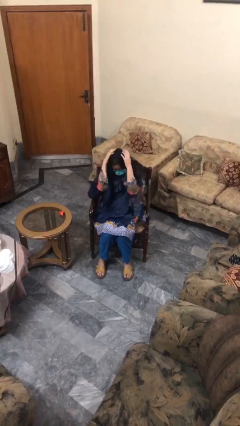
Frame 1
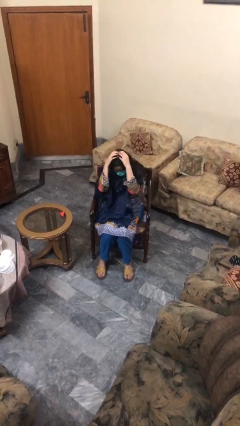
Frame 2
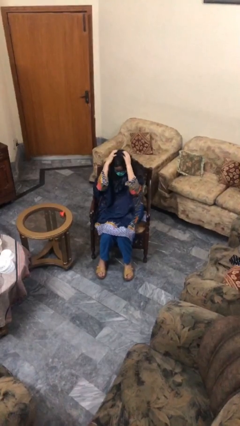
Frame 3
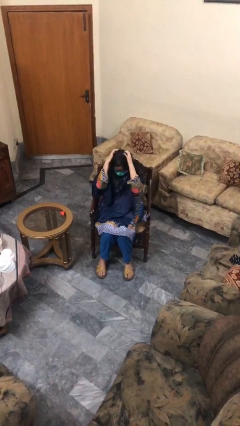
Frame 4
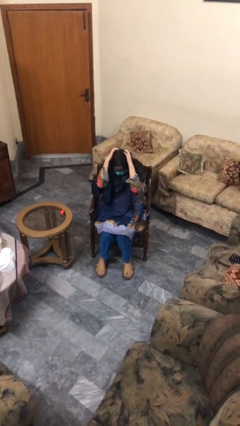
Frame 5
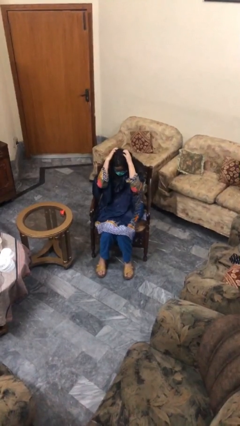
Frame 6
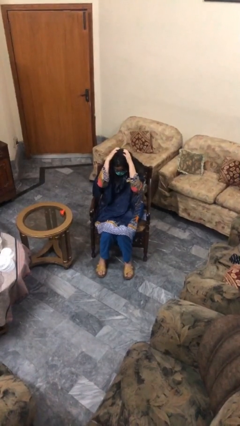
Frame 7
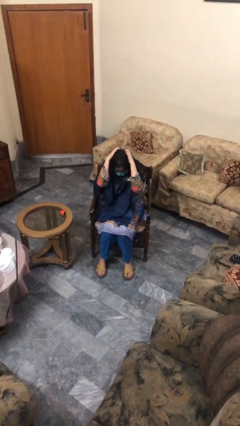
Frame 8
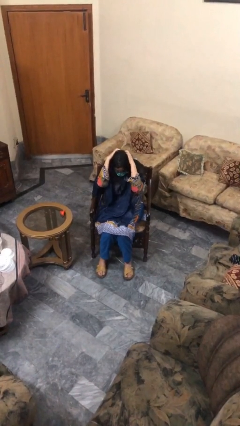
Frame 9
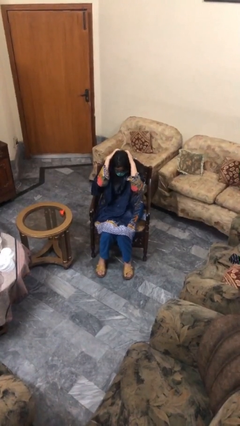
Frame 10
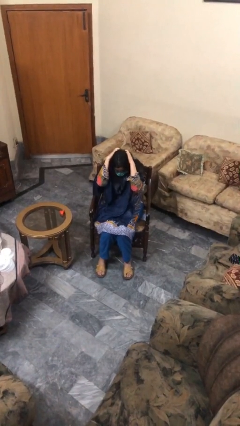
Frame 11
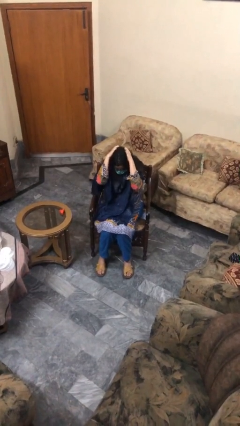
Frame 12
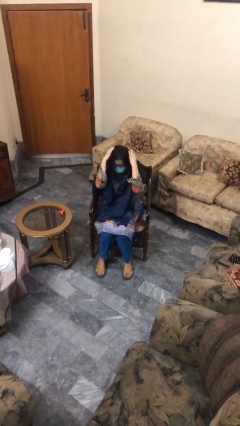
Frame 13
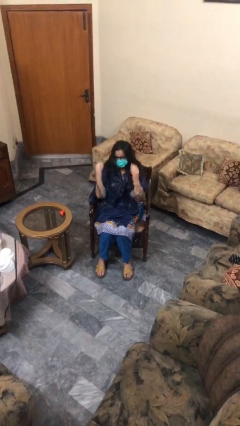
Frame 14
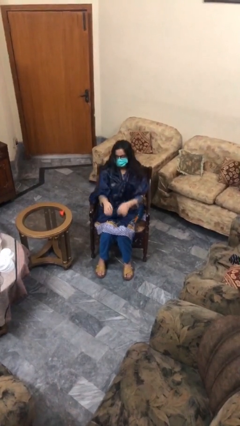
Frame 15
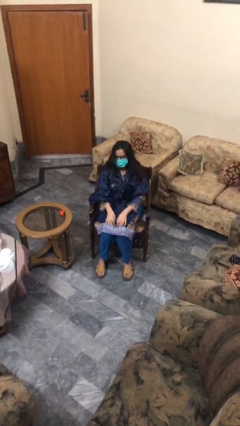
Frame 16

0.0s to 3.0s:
person pats head

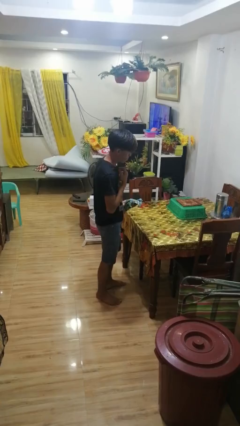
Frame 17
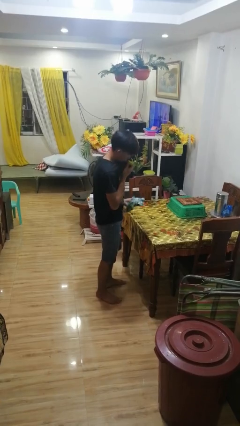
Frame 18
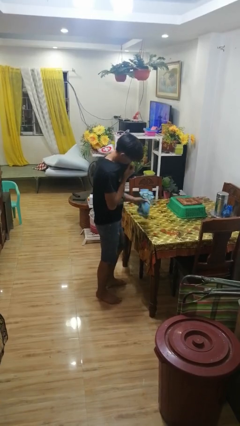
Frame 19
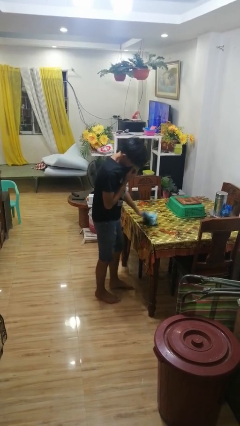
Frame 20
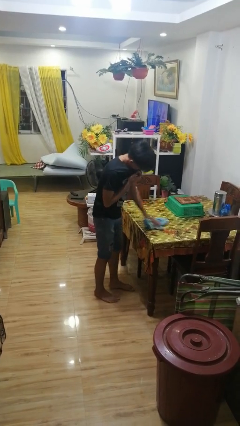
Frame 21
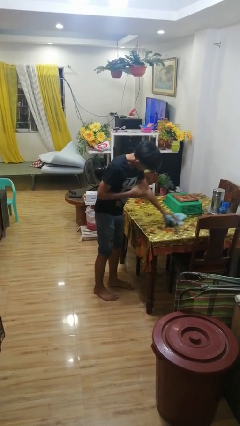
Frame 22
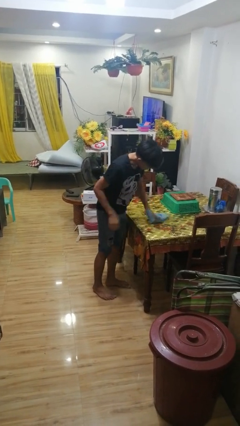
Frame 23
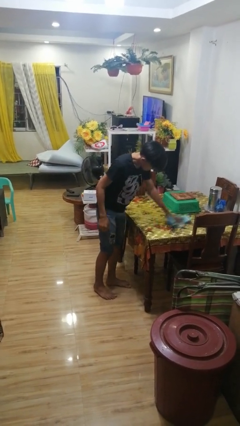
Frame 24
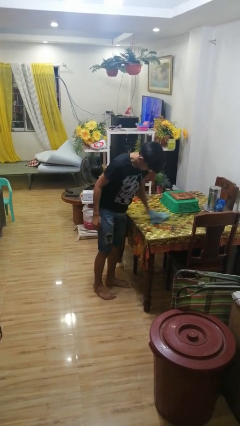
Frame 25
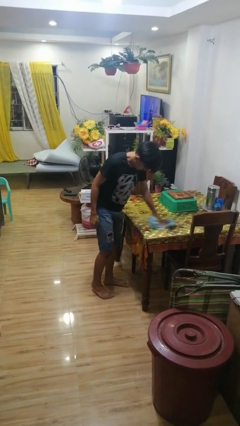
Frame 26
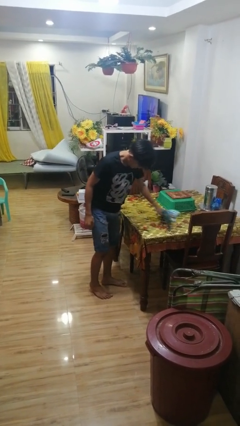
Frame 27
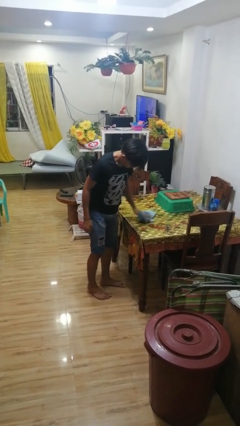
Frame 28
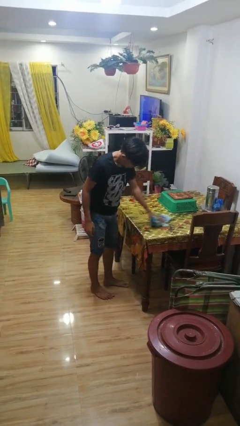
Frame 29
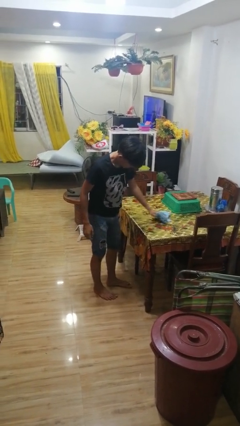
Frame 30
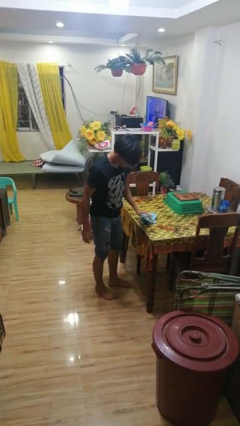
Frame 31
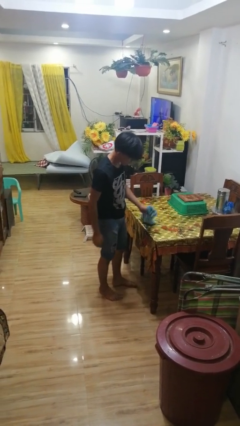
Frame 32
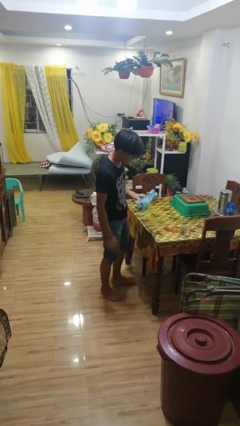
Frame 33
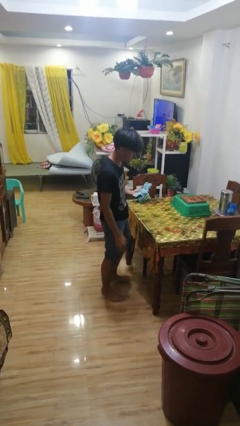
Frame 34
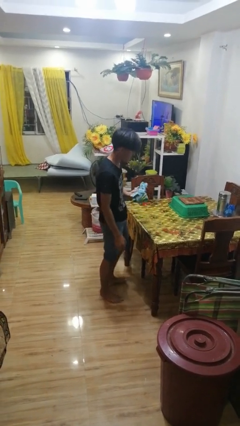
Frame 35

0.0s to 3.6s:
person cleans table with rag

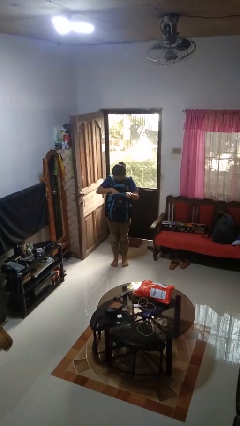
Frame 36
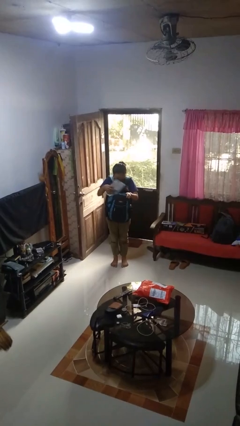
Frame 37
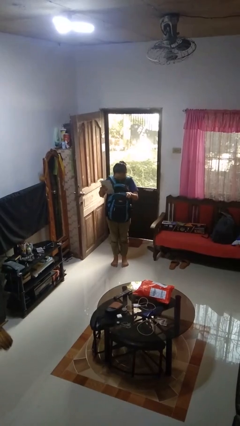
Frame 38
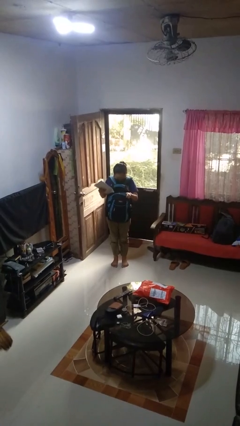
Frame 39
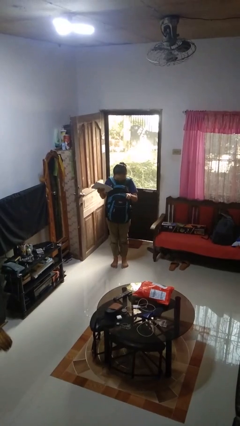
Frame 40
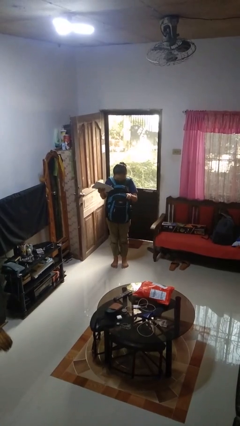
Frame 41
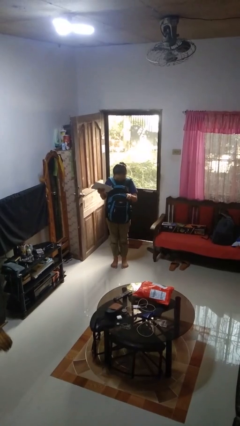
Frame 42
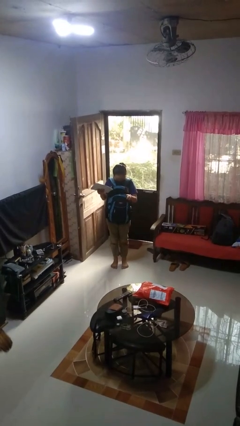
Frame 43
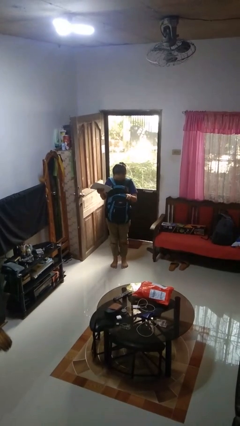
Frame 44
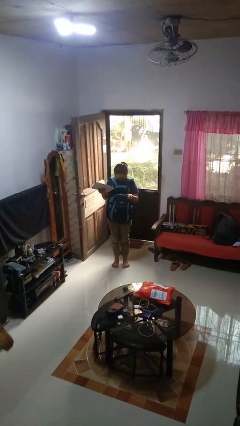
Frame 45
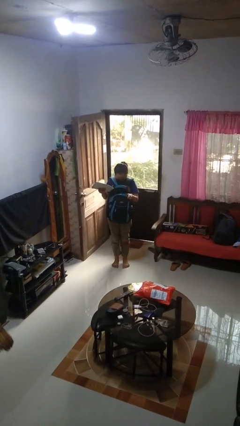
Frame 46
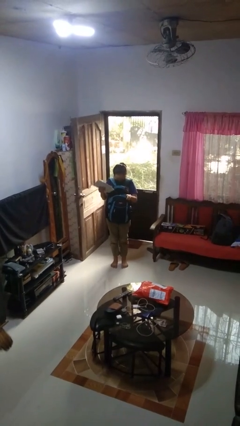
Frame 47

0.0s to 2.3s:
person takes object from backpack

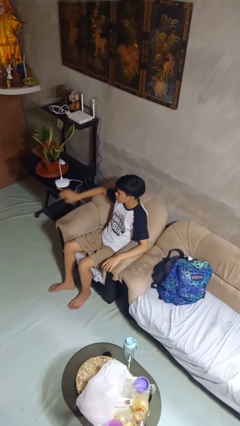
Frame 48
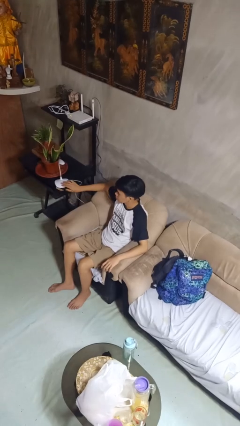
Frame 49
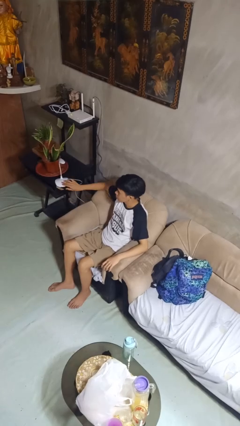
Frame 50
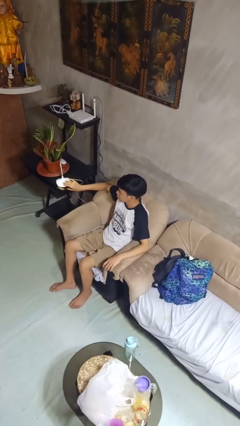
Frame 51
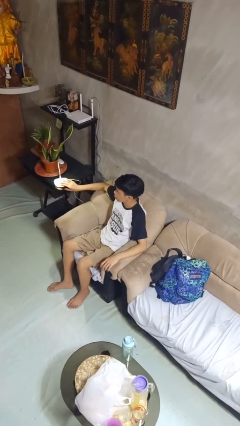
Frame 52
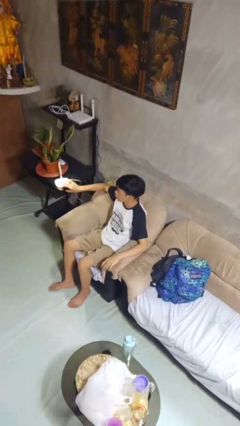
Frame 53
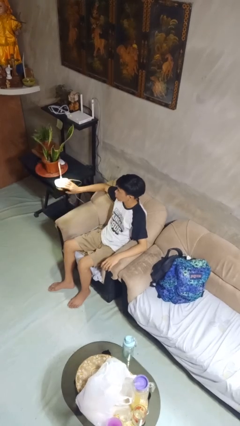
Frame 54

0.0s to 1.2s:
person turns on lamp

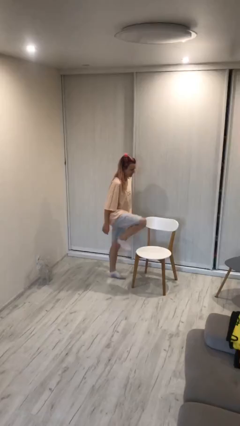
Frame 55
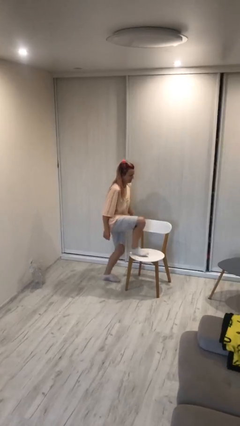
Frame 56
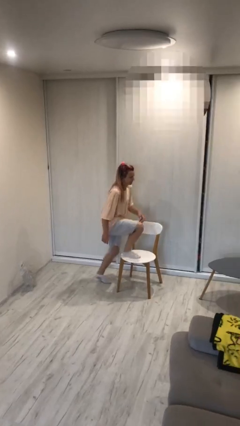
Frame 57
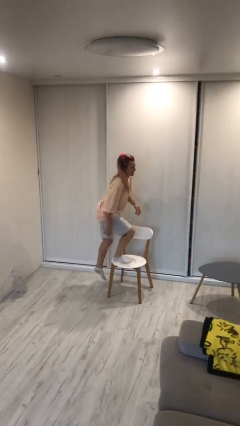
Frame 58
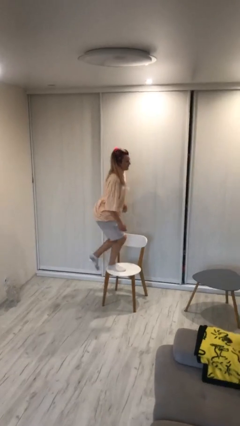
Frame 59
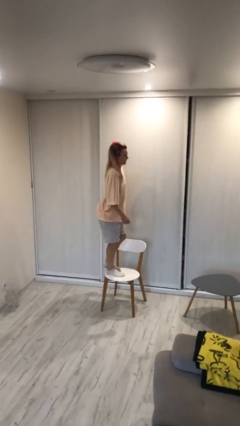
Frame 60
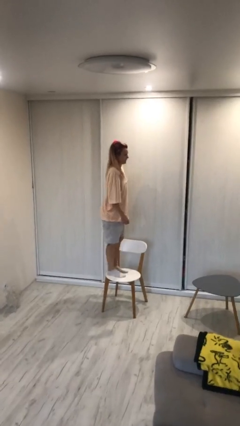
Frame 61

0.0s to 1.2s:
person climbs on chair

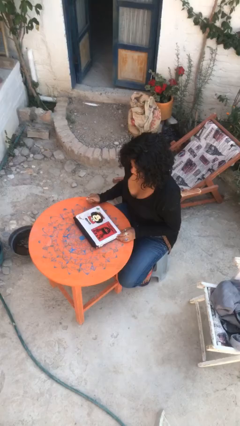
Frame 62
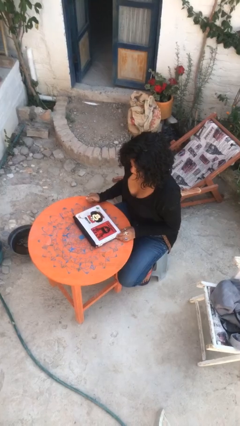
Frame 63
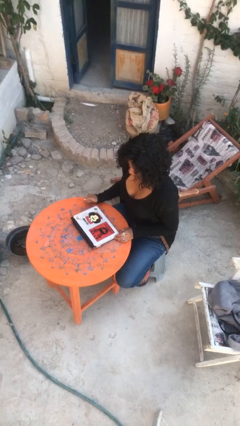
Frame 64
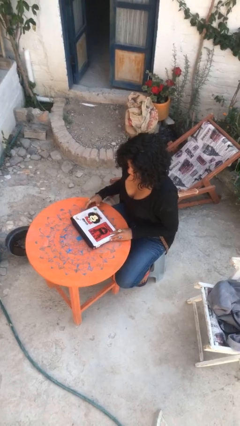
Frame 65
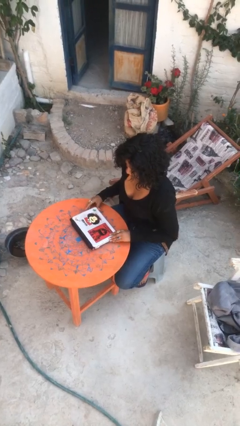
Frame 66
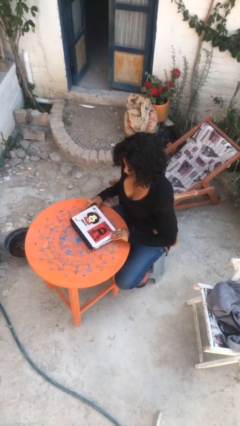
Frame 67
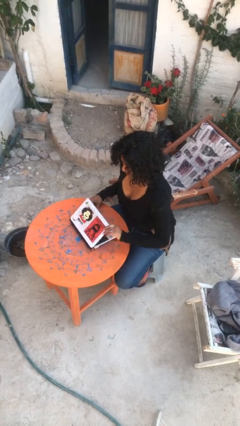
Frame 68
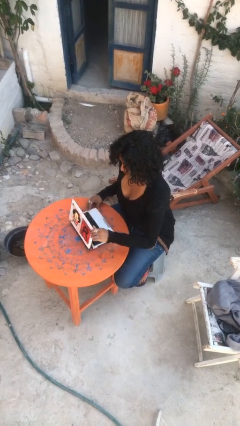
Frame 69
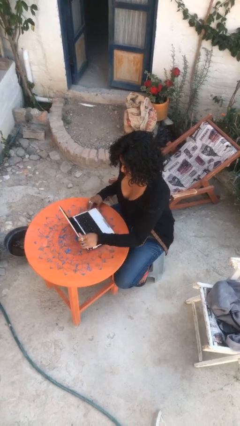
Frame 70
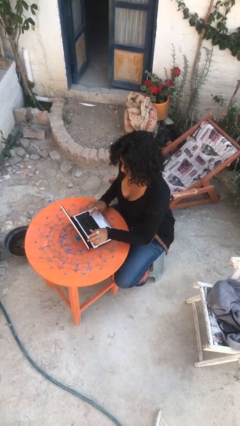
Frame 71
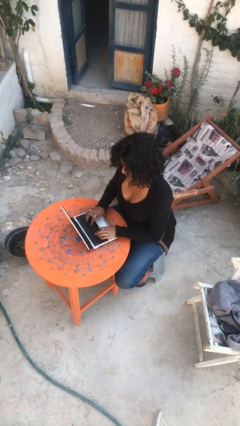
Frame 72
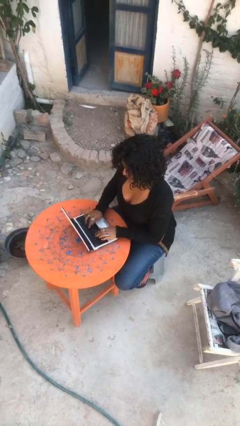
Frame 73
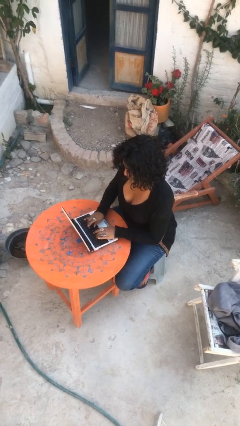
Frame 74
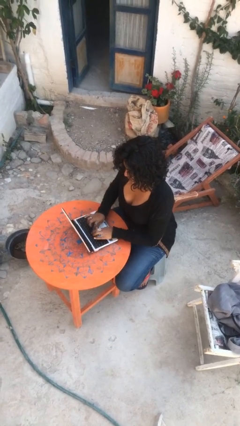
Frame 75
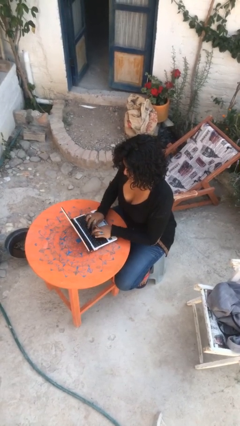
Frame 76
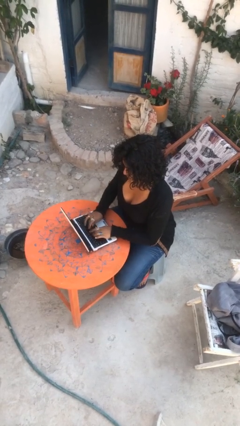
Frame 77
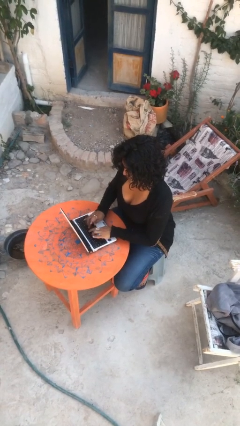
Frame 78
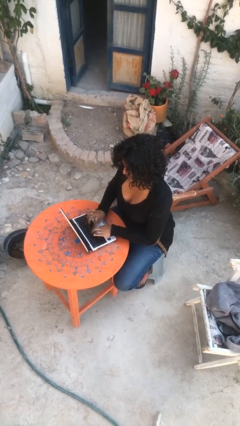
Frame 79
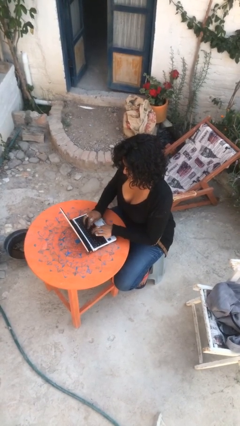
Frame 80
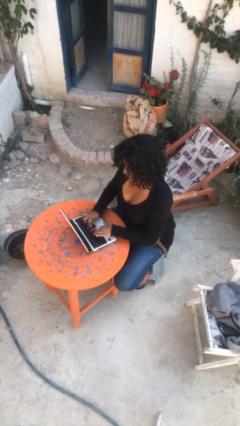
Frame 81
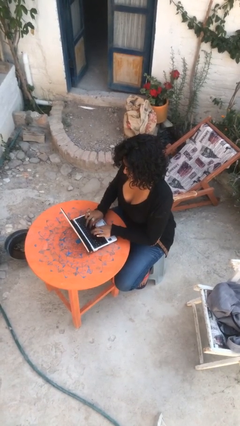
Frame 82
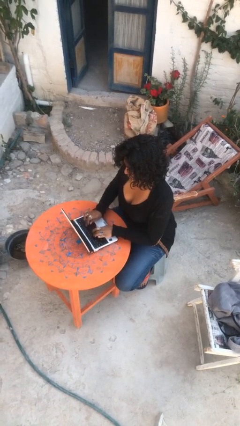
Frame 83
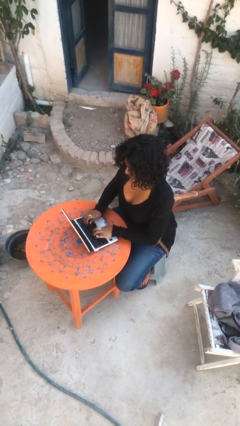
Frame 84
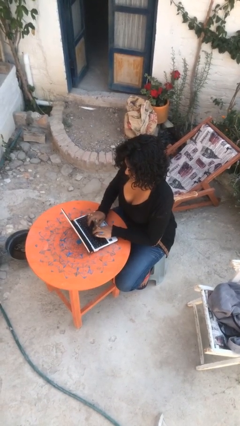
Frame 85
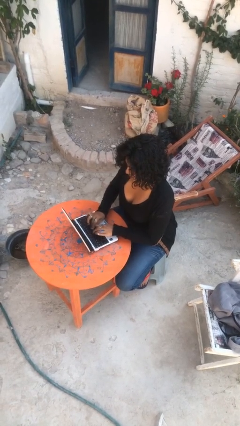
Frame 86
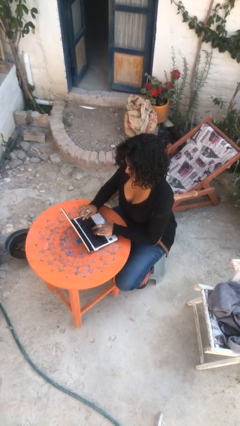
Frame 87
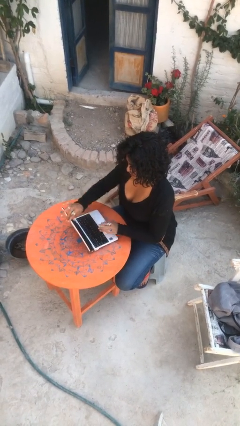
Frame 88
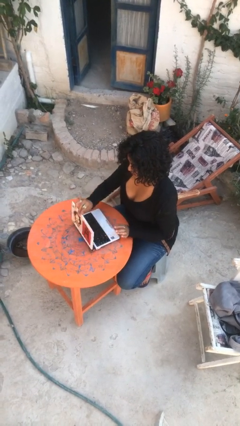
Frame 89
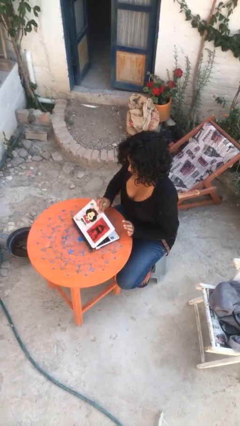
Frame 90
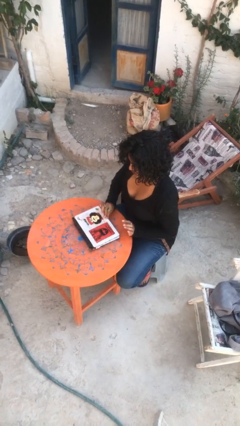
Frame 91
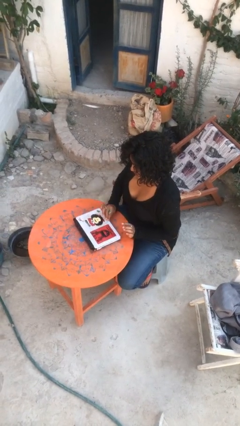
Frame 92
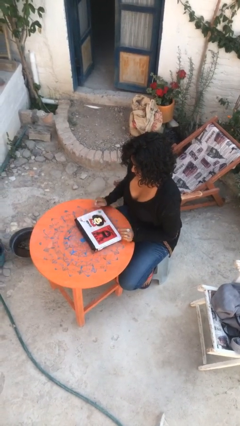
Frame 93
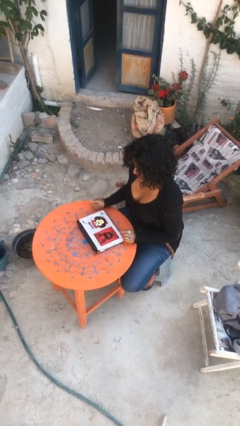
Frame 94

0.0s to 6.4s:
person interacts with laptop
